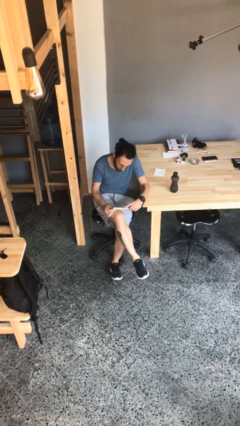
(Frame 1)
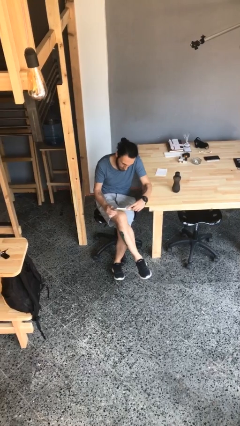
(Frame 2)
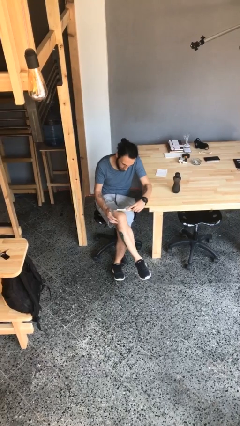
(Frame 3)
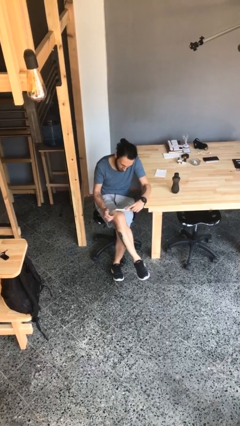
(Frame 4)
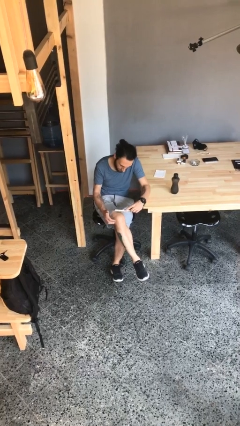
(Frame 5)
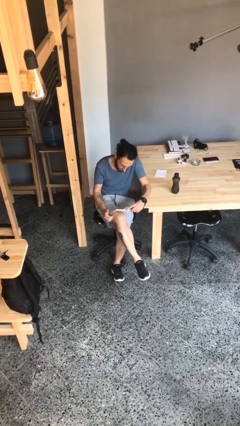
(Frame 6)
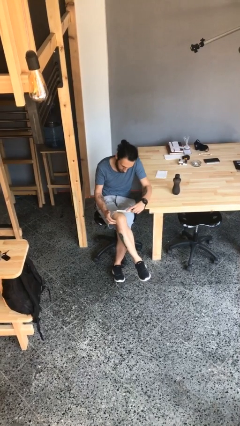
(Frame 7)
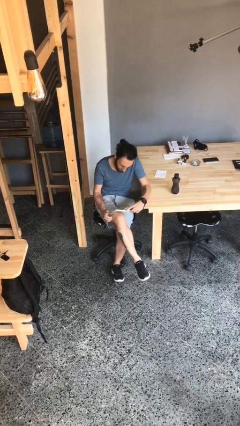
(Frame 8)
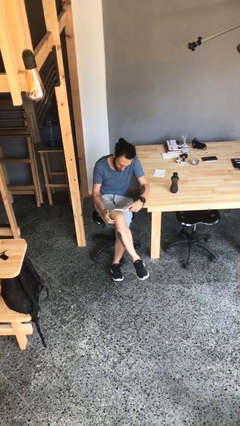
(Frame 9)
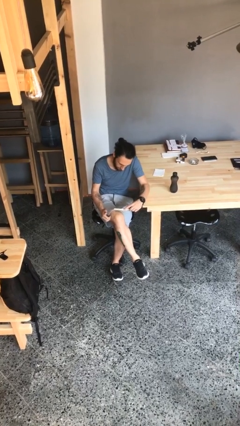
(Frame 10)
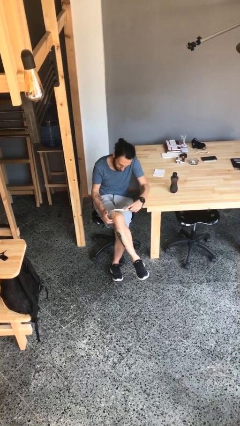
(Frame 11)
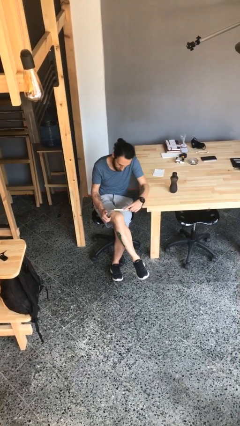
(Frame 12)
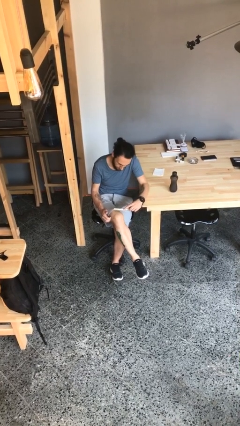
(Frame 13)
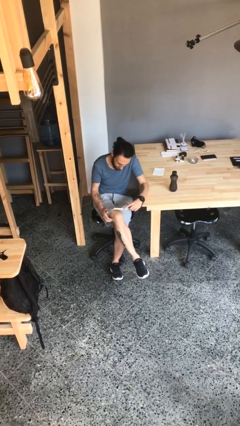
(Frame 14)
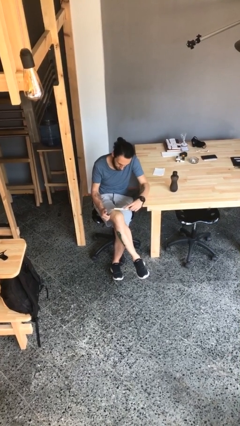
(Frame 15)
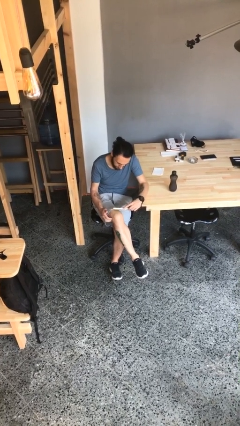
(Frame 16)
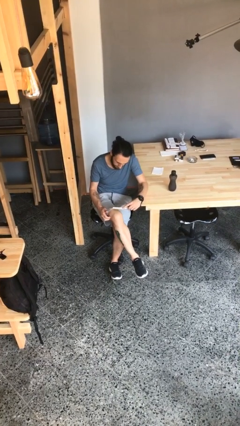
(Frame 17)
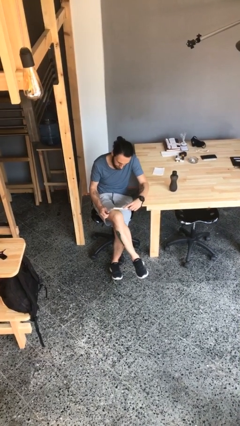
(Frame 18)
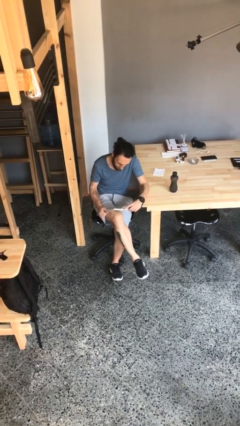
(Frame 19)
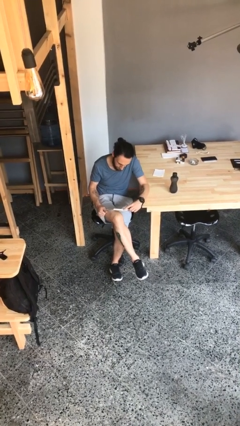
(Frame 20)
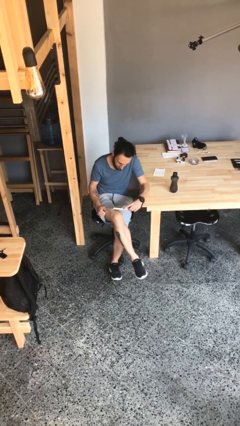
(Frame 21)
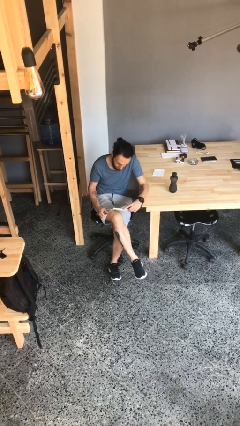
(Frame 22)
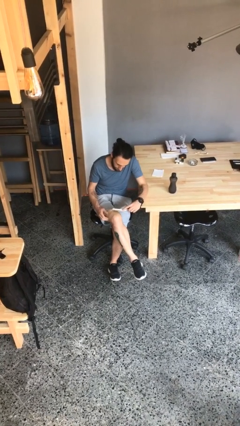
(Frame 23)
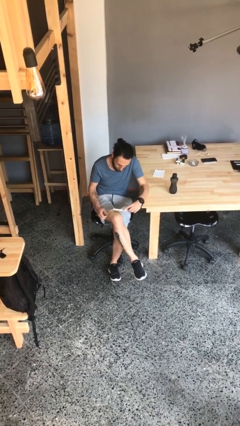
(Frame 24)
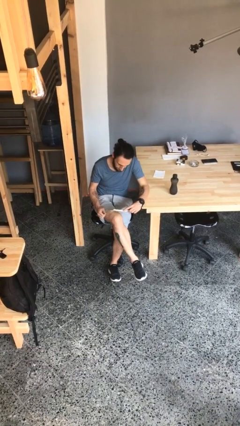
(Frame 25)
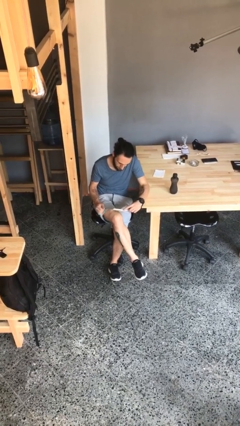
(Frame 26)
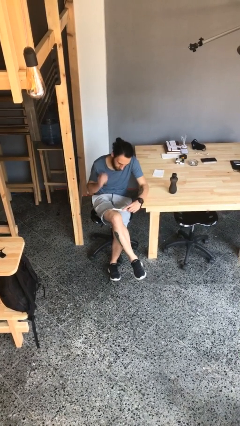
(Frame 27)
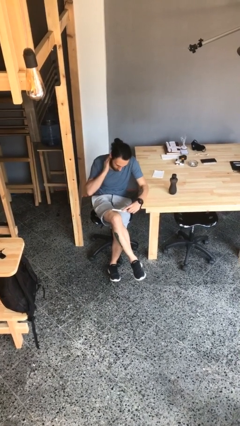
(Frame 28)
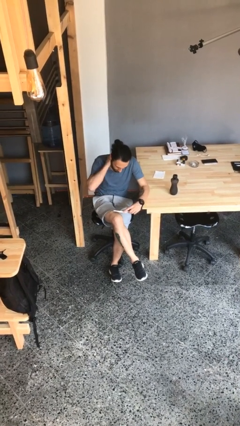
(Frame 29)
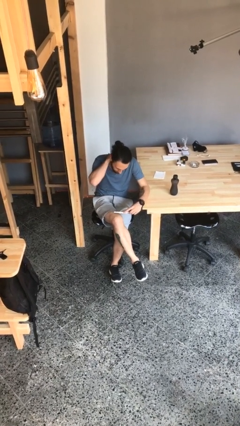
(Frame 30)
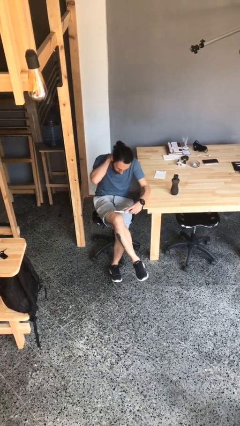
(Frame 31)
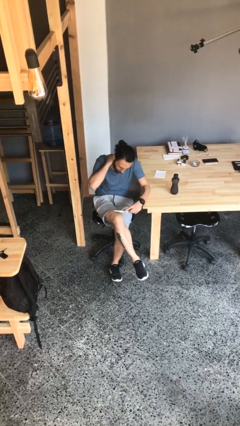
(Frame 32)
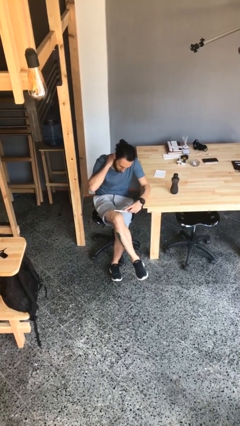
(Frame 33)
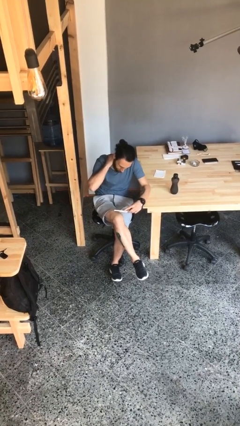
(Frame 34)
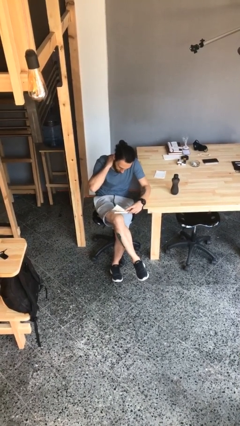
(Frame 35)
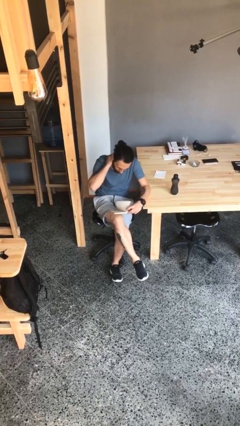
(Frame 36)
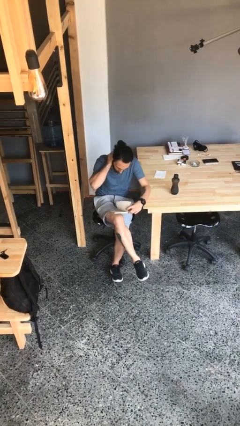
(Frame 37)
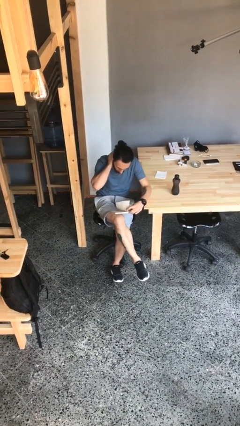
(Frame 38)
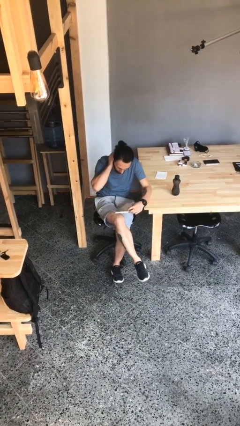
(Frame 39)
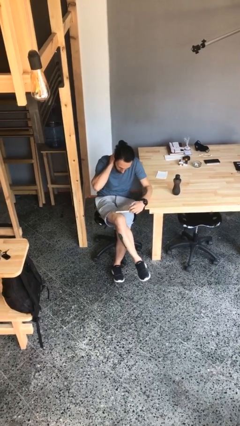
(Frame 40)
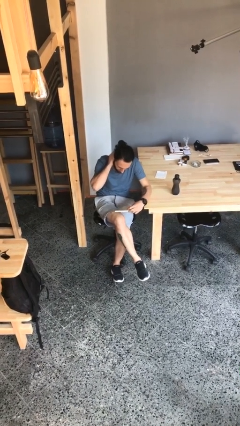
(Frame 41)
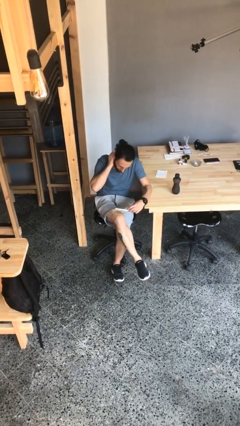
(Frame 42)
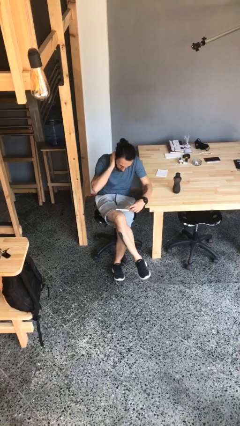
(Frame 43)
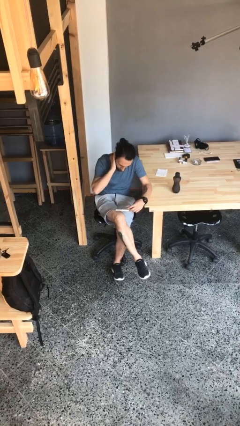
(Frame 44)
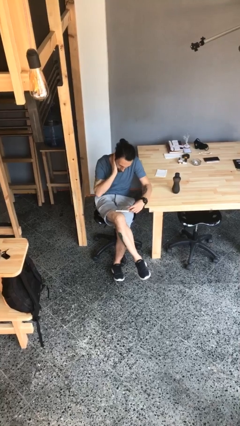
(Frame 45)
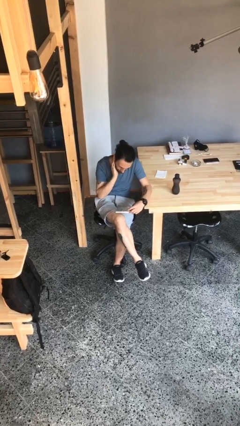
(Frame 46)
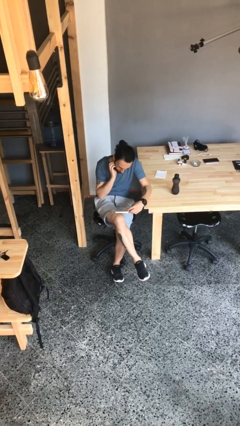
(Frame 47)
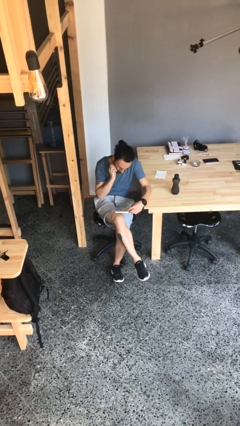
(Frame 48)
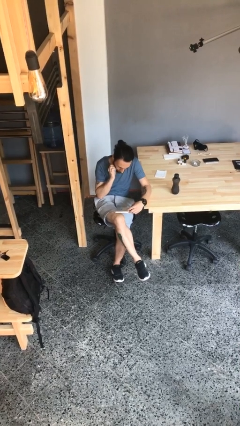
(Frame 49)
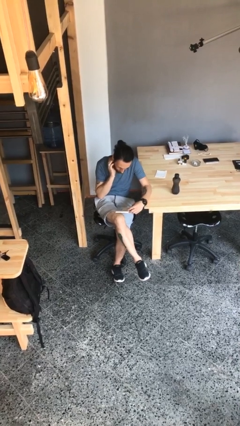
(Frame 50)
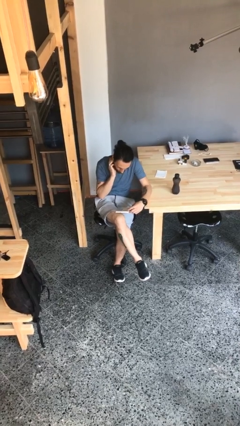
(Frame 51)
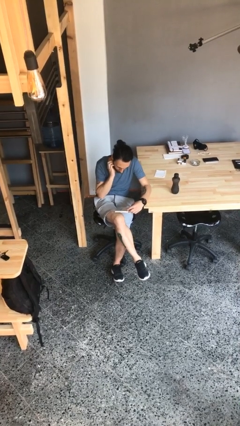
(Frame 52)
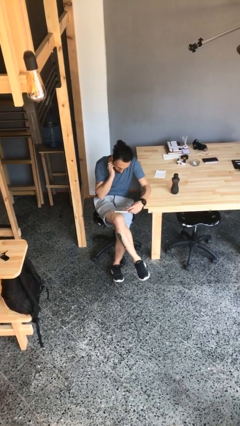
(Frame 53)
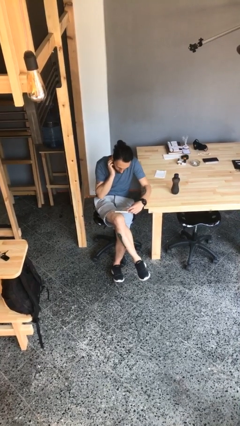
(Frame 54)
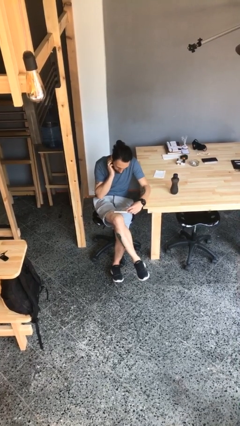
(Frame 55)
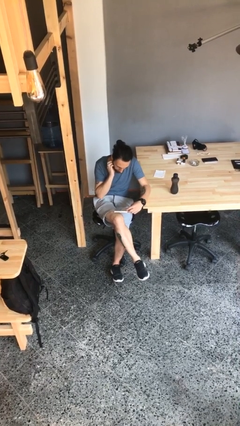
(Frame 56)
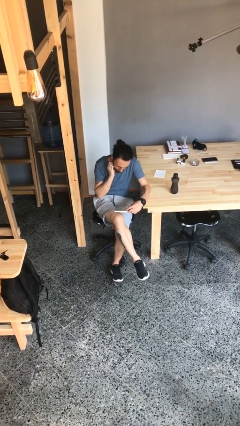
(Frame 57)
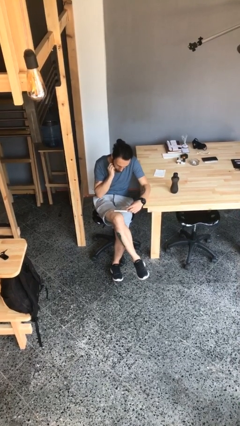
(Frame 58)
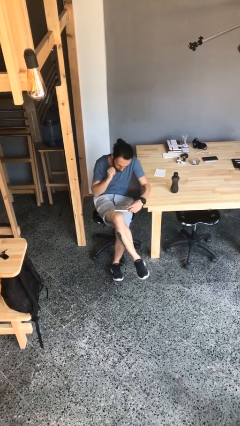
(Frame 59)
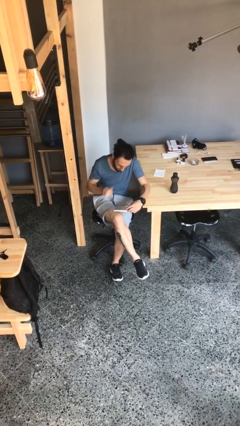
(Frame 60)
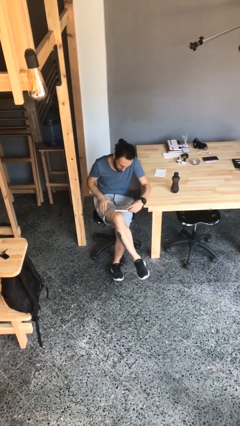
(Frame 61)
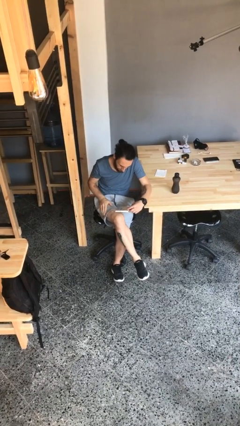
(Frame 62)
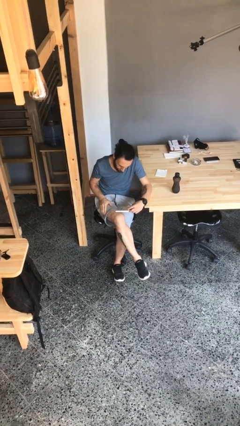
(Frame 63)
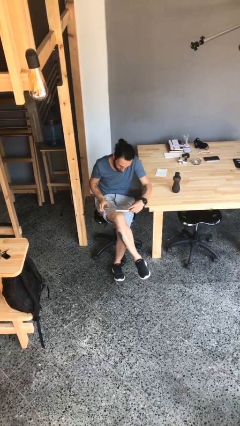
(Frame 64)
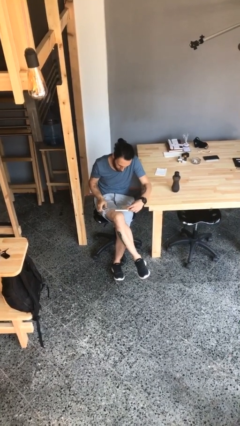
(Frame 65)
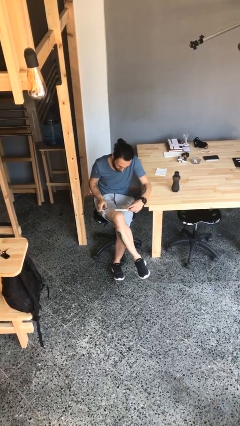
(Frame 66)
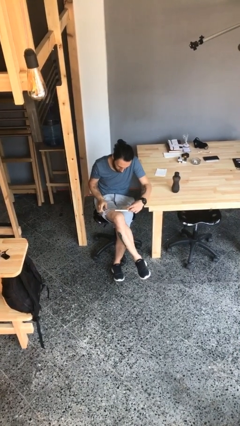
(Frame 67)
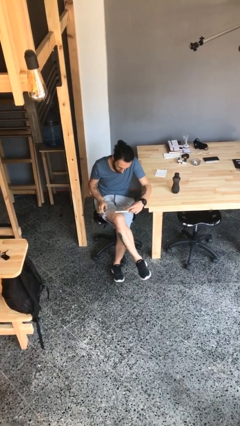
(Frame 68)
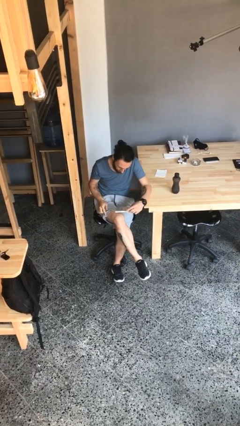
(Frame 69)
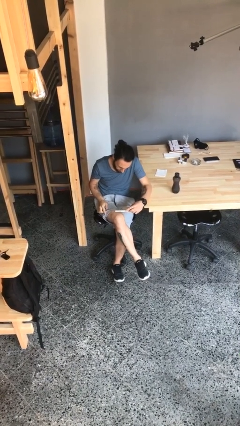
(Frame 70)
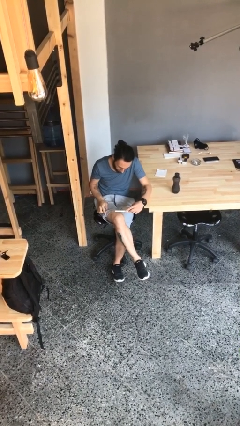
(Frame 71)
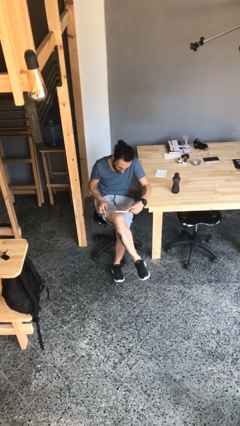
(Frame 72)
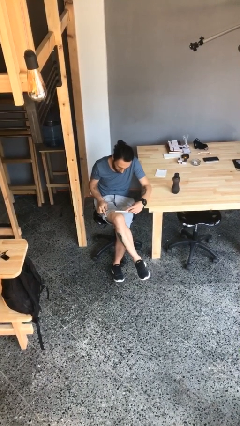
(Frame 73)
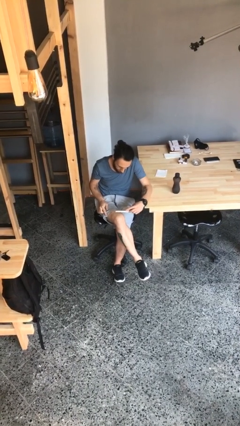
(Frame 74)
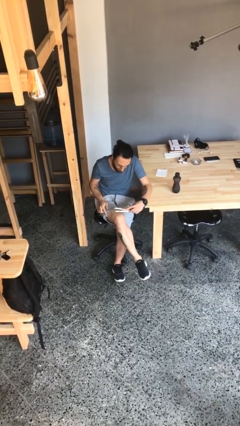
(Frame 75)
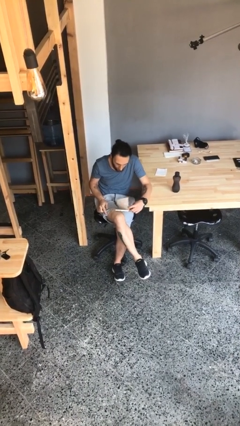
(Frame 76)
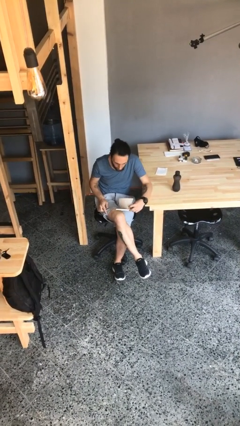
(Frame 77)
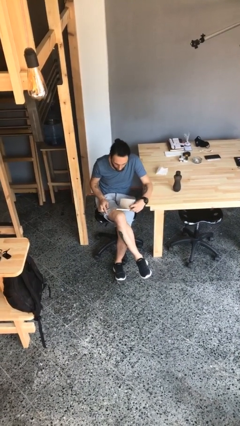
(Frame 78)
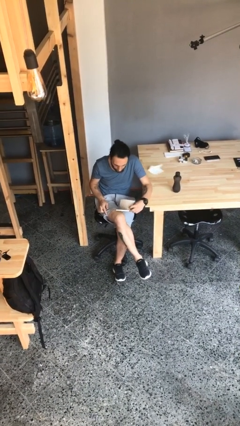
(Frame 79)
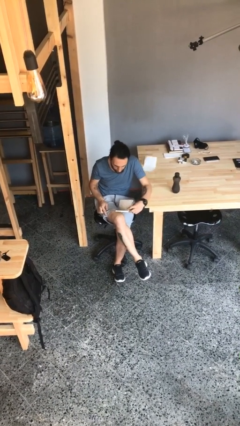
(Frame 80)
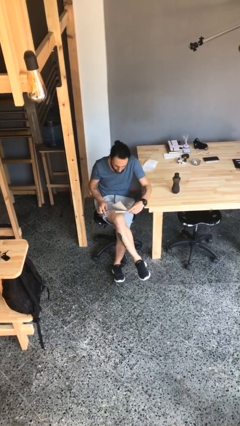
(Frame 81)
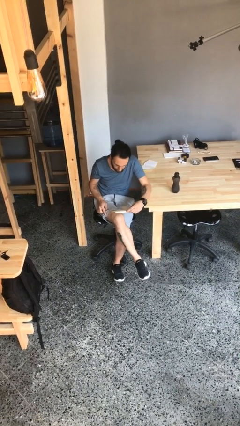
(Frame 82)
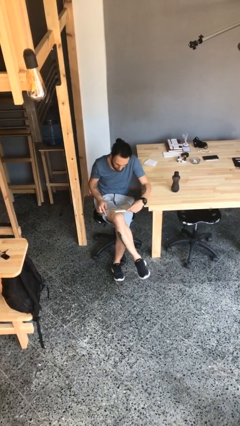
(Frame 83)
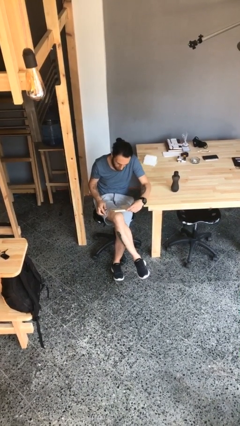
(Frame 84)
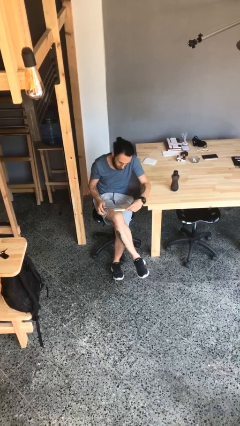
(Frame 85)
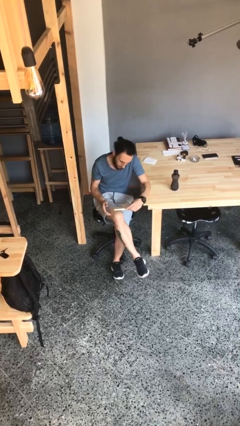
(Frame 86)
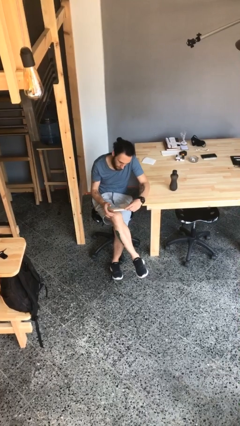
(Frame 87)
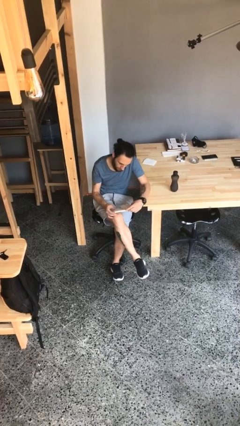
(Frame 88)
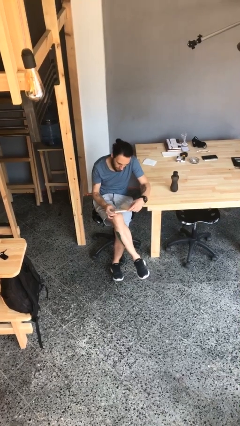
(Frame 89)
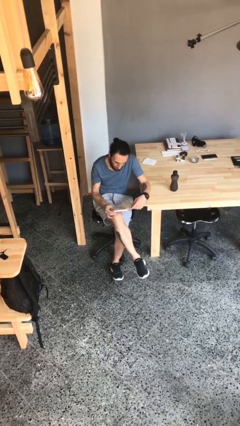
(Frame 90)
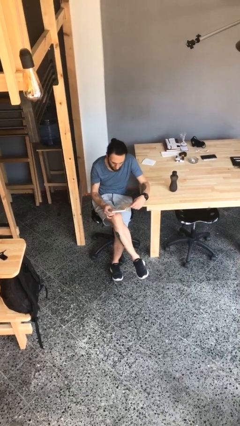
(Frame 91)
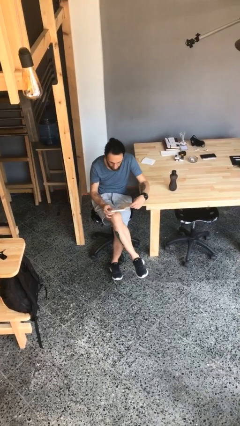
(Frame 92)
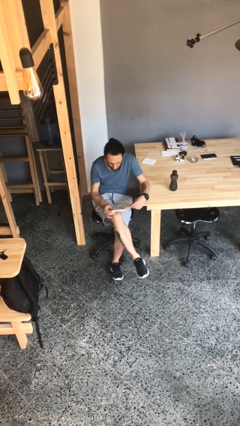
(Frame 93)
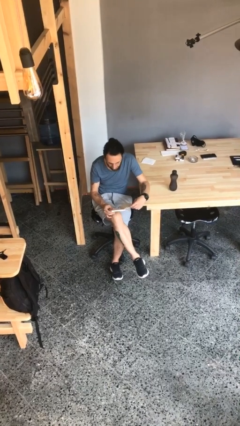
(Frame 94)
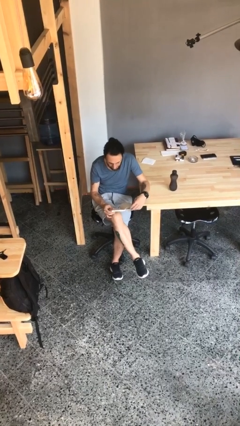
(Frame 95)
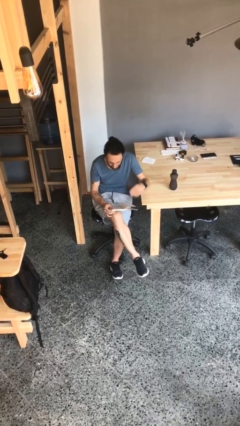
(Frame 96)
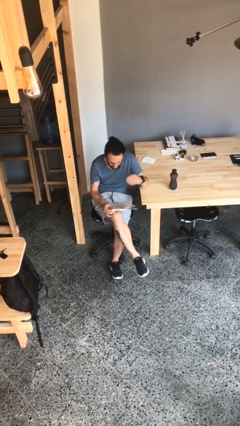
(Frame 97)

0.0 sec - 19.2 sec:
person reads document
